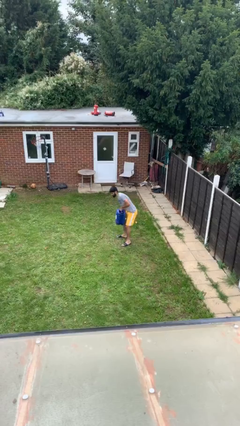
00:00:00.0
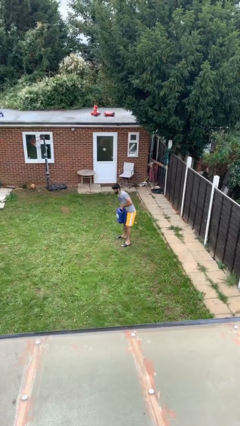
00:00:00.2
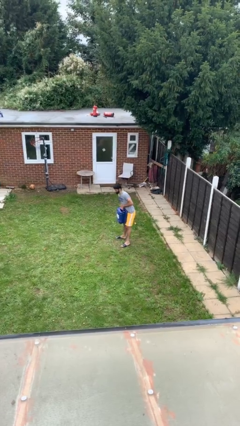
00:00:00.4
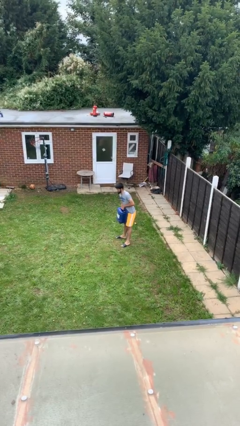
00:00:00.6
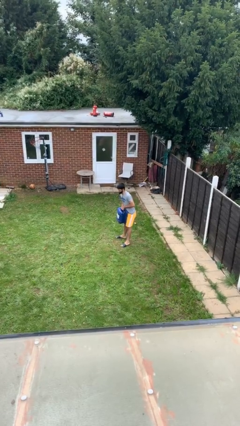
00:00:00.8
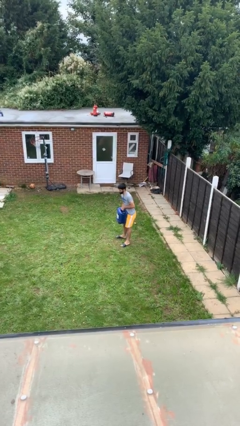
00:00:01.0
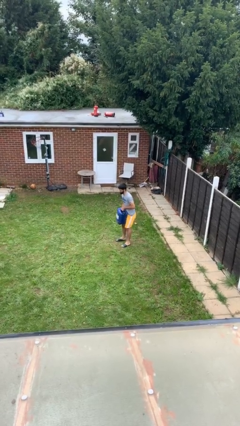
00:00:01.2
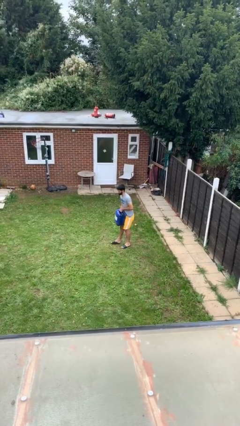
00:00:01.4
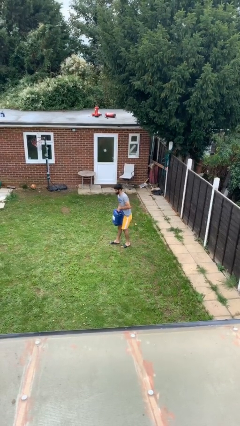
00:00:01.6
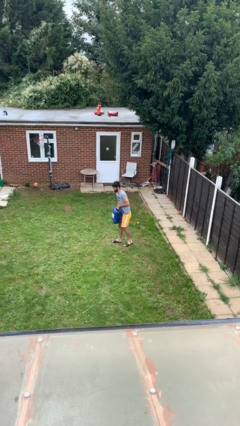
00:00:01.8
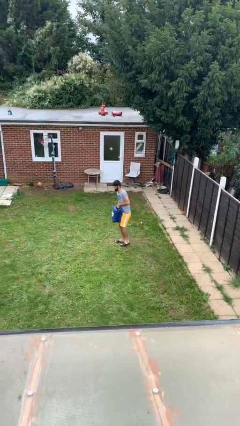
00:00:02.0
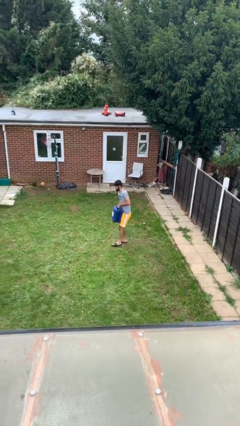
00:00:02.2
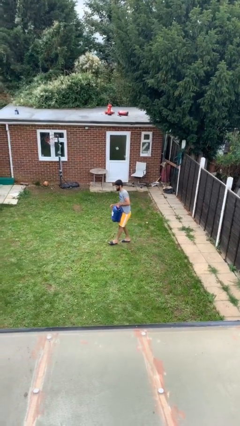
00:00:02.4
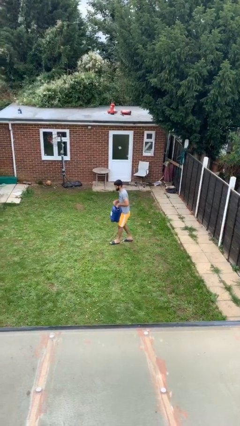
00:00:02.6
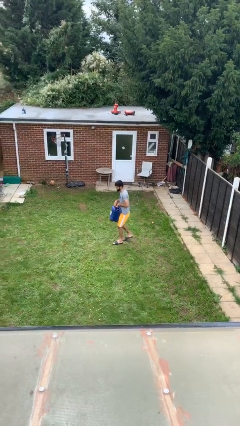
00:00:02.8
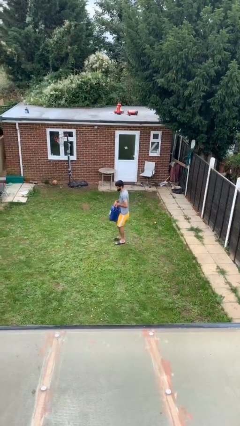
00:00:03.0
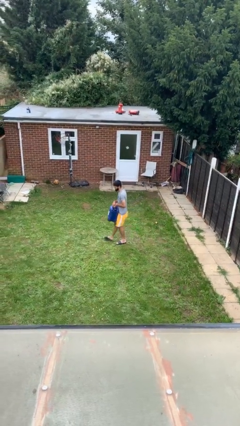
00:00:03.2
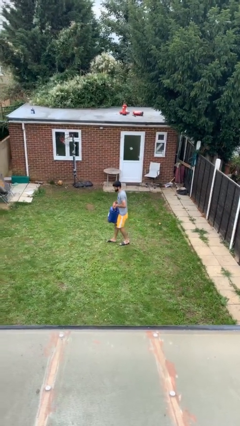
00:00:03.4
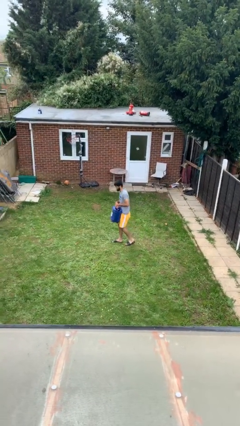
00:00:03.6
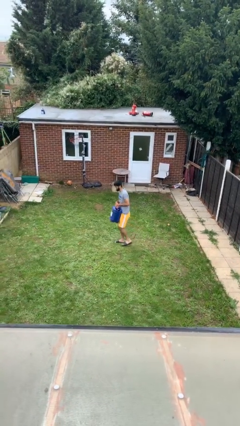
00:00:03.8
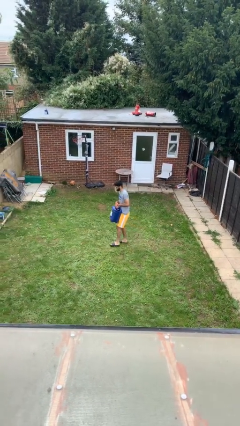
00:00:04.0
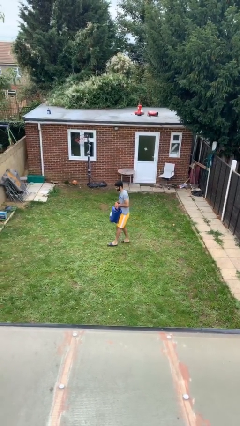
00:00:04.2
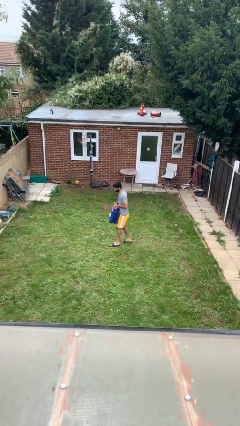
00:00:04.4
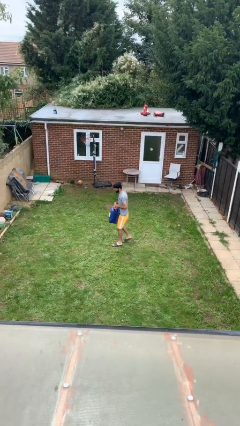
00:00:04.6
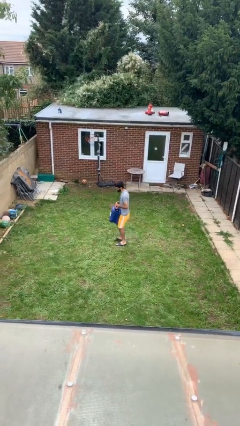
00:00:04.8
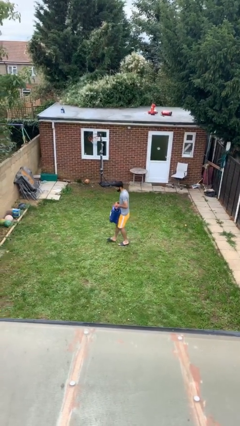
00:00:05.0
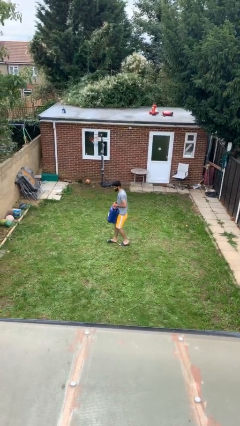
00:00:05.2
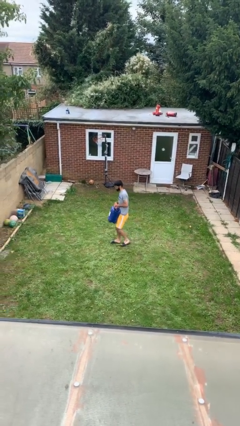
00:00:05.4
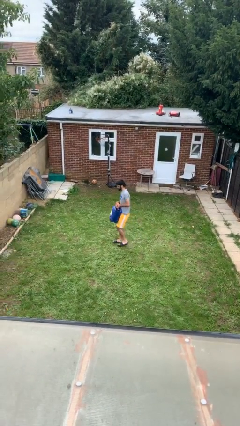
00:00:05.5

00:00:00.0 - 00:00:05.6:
person carries heavy object

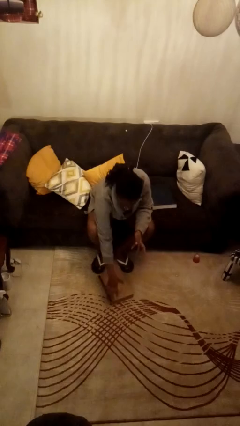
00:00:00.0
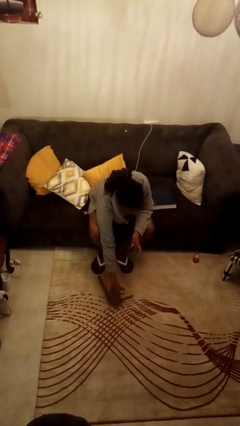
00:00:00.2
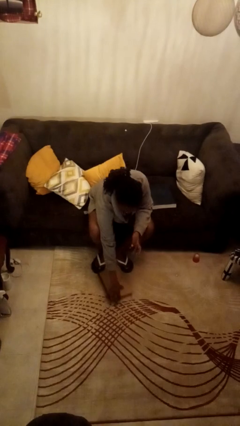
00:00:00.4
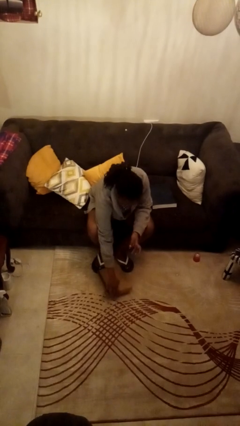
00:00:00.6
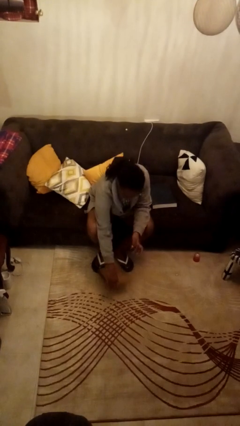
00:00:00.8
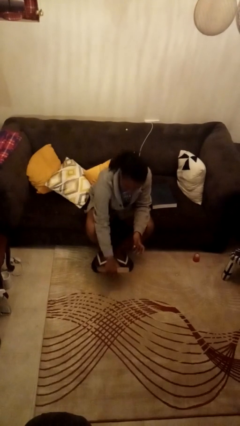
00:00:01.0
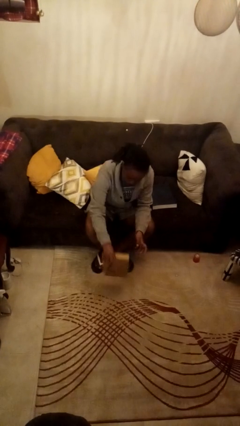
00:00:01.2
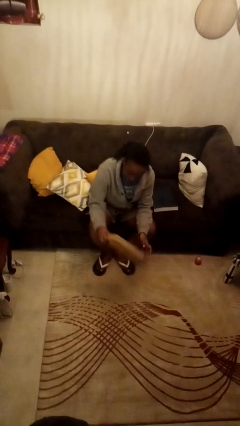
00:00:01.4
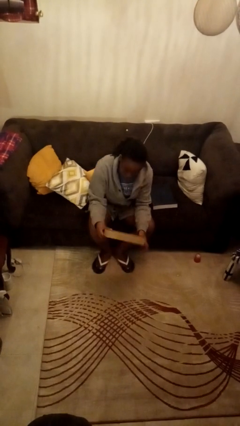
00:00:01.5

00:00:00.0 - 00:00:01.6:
person picks up object from floor

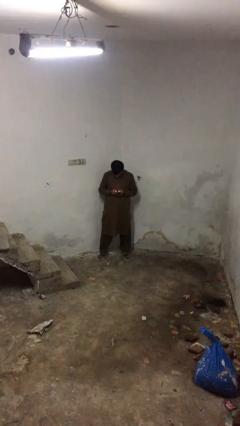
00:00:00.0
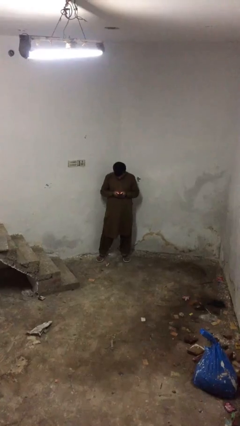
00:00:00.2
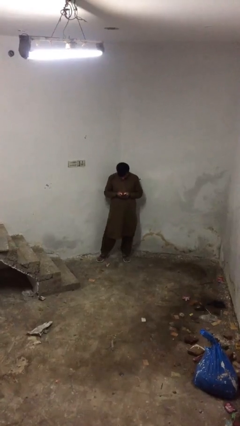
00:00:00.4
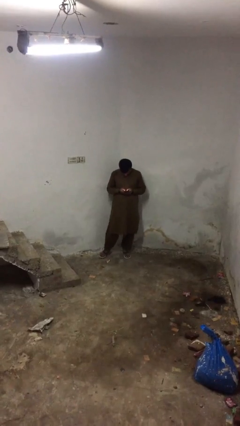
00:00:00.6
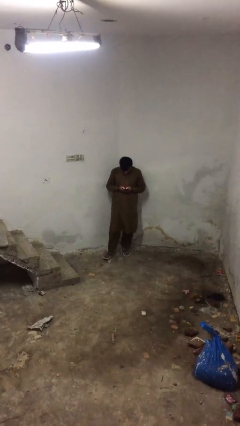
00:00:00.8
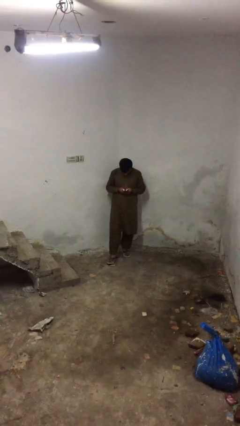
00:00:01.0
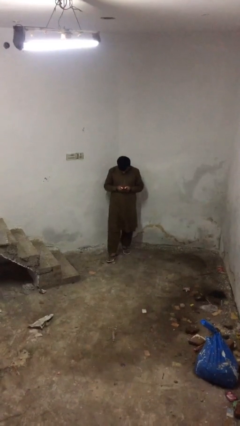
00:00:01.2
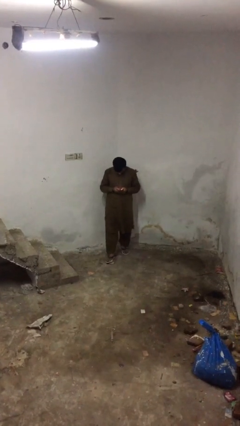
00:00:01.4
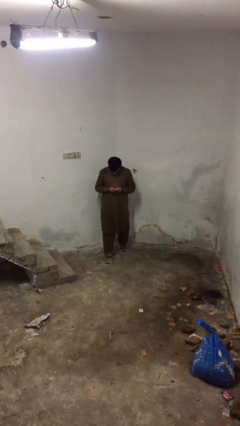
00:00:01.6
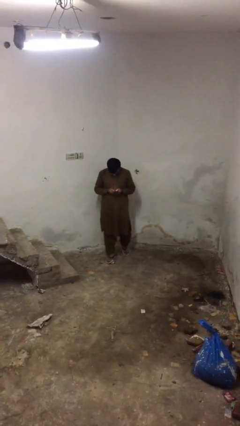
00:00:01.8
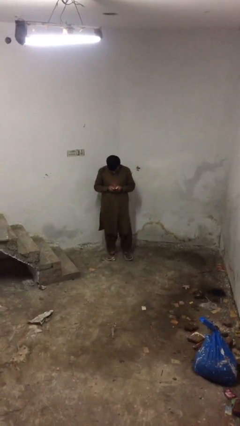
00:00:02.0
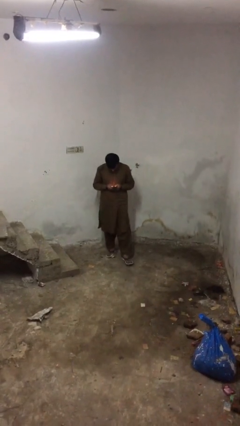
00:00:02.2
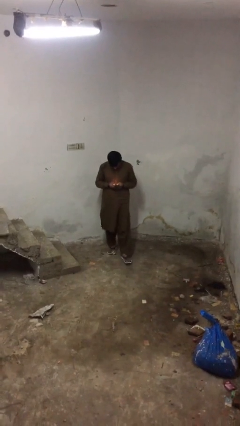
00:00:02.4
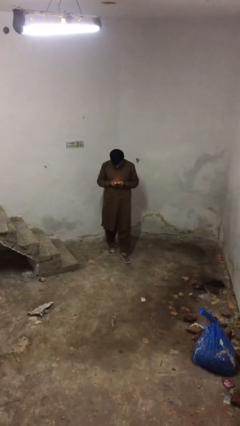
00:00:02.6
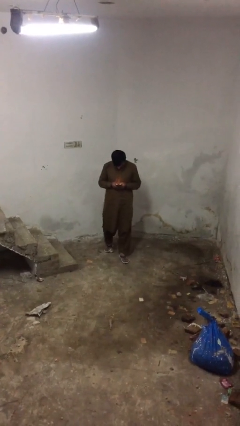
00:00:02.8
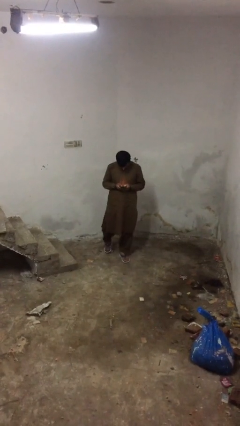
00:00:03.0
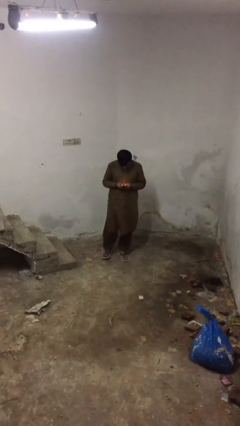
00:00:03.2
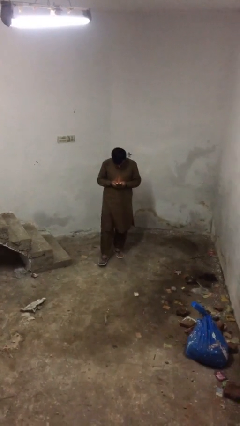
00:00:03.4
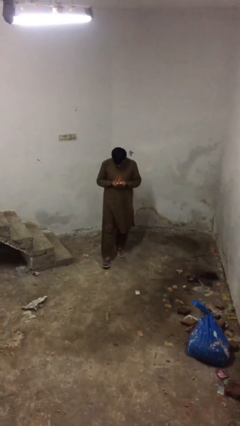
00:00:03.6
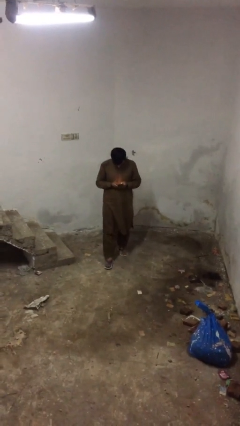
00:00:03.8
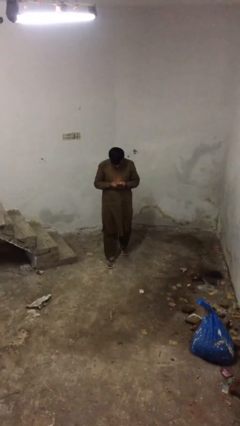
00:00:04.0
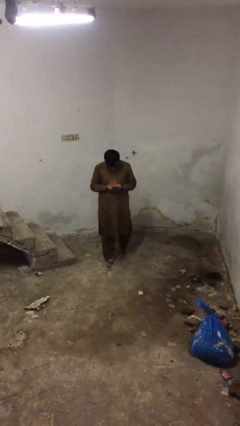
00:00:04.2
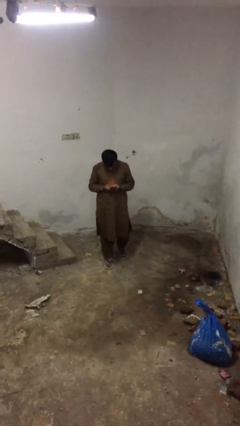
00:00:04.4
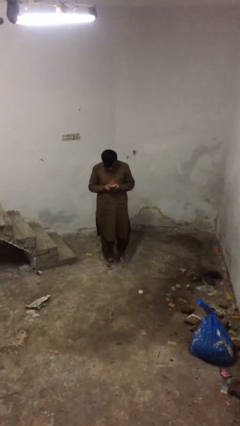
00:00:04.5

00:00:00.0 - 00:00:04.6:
person texts on phone

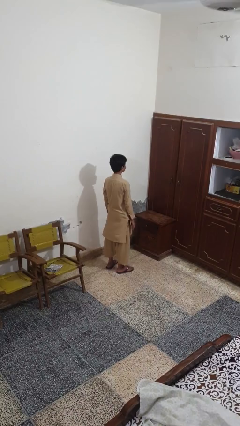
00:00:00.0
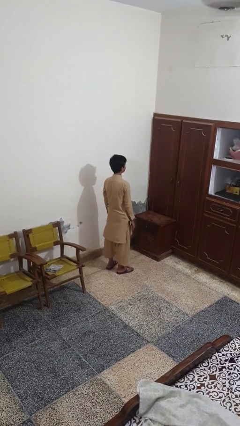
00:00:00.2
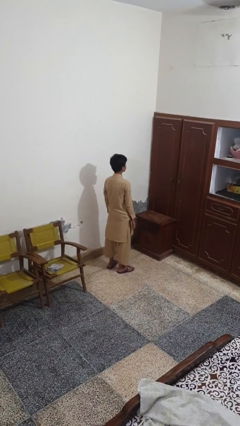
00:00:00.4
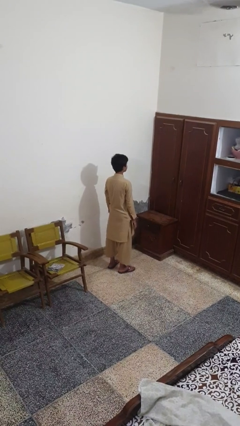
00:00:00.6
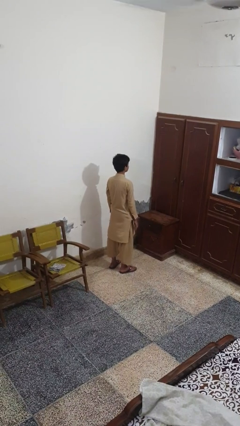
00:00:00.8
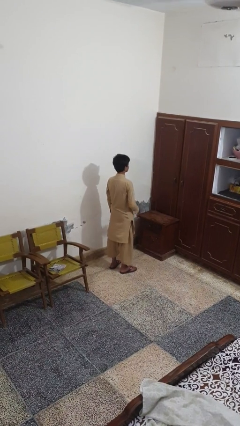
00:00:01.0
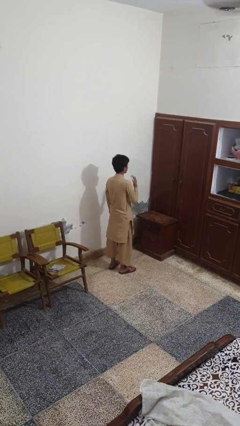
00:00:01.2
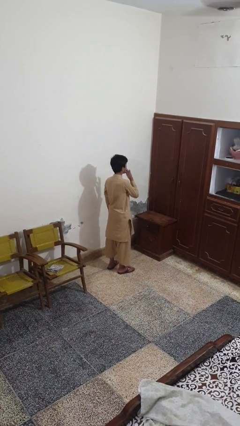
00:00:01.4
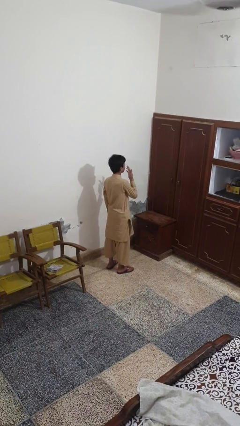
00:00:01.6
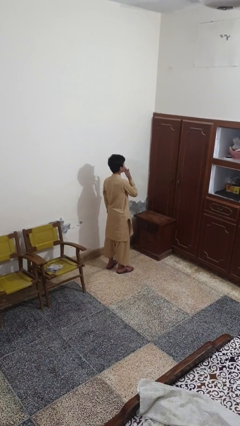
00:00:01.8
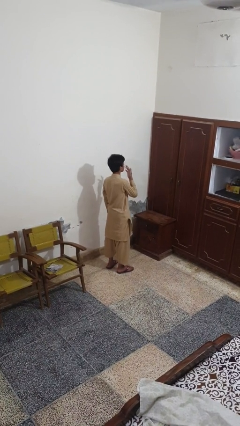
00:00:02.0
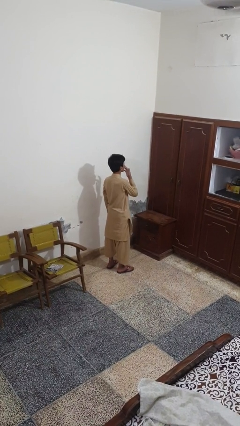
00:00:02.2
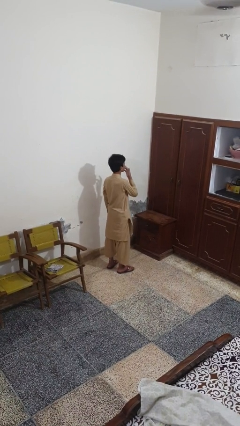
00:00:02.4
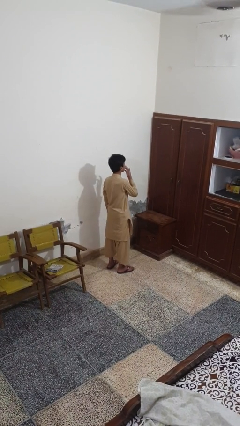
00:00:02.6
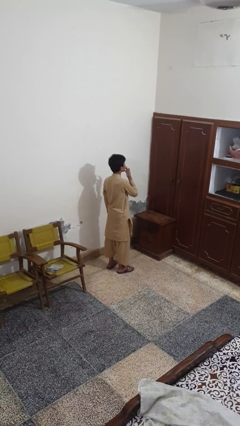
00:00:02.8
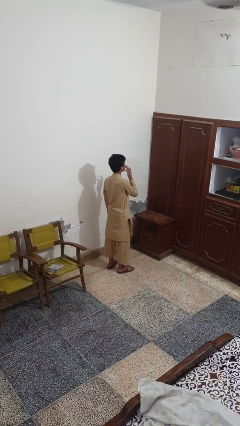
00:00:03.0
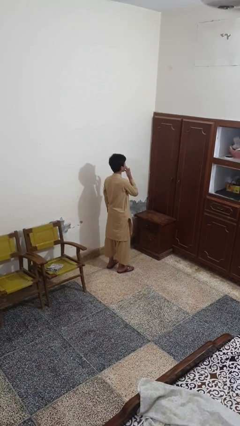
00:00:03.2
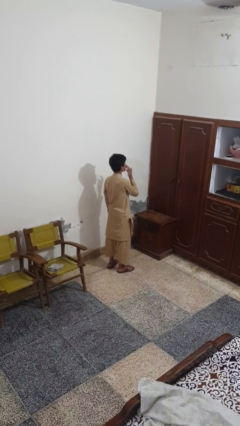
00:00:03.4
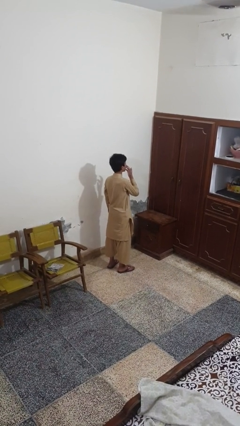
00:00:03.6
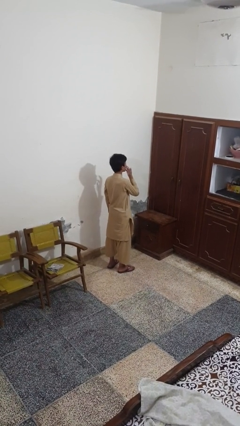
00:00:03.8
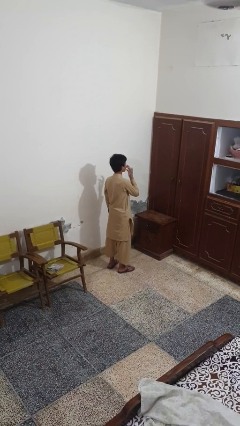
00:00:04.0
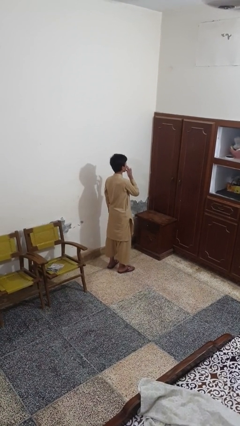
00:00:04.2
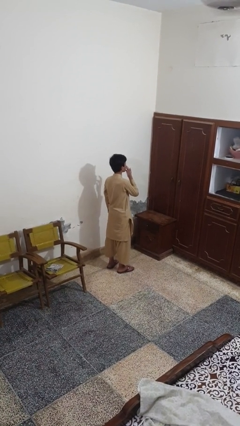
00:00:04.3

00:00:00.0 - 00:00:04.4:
person licks fingers

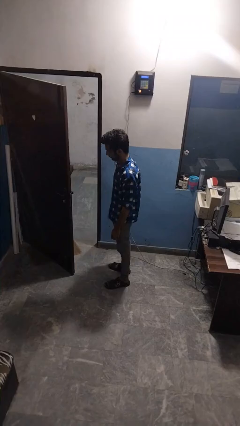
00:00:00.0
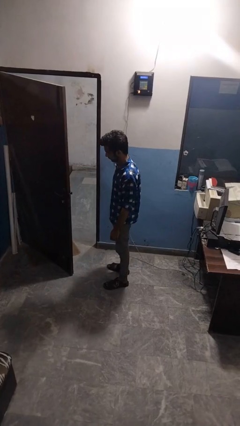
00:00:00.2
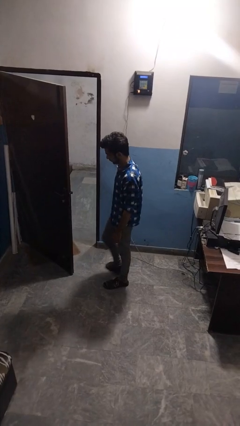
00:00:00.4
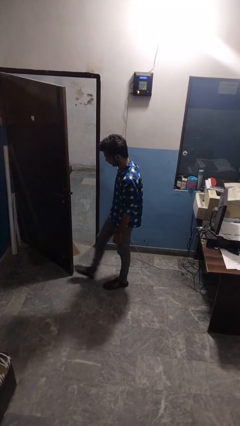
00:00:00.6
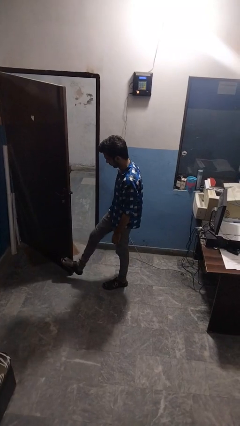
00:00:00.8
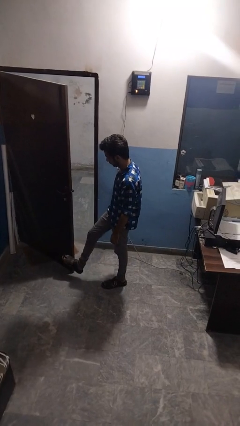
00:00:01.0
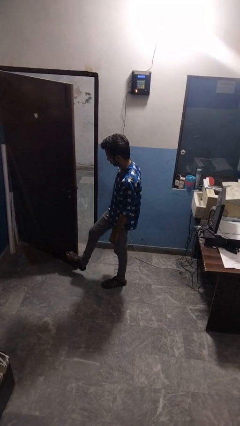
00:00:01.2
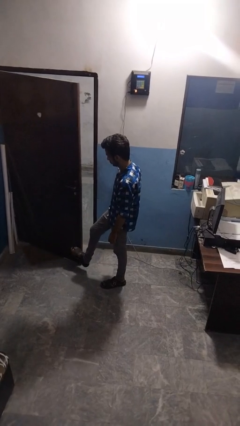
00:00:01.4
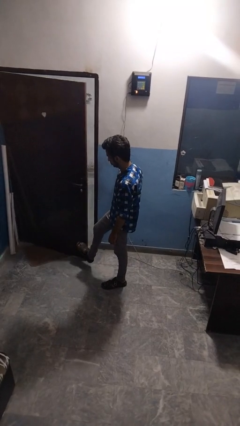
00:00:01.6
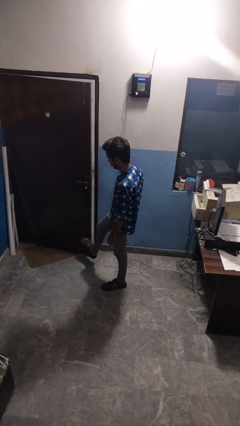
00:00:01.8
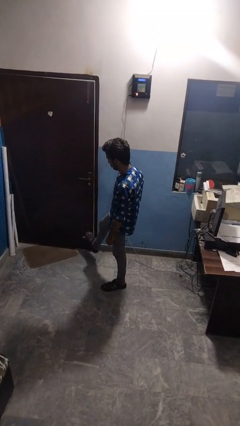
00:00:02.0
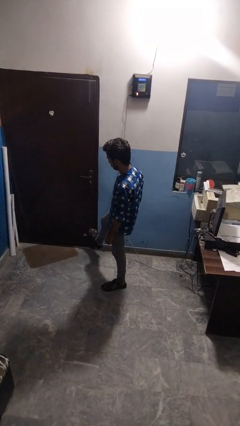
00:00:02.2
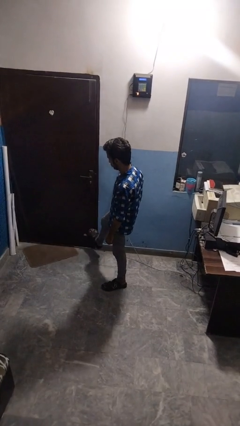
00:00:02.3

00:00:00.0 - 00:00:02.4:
person closes door with foot
